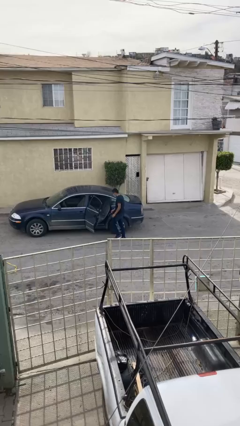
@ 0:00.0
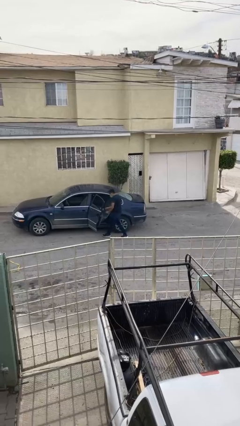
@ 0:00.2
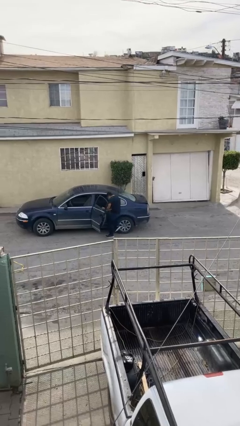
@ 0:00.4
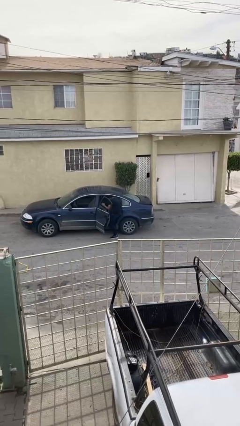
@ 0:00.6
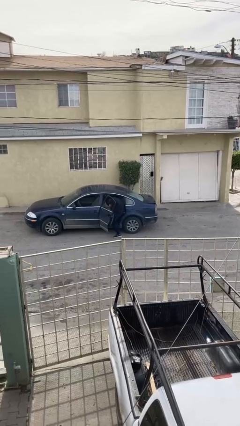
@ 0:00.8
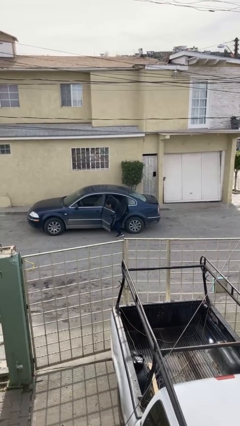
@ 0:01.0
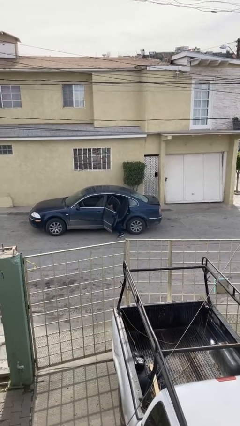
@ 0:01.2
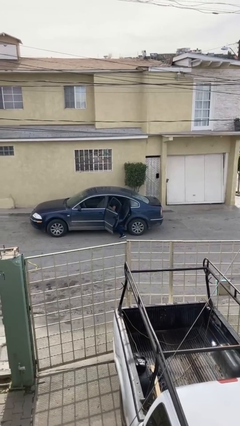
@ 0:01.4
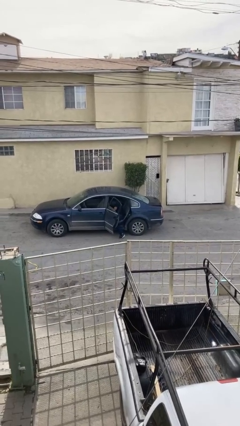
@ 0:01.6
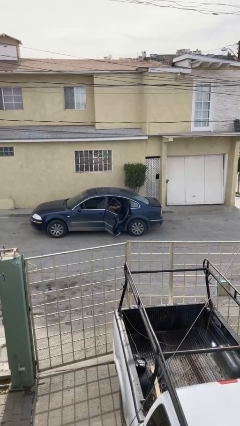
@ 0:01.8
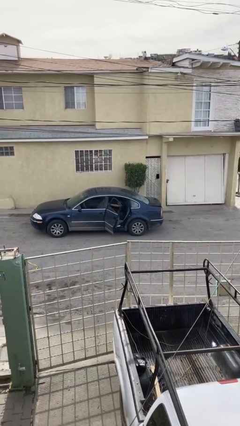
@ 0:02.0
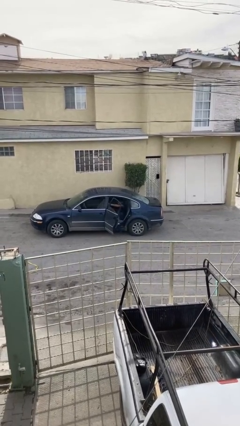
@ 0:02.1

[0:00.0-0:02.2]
person enters car

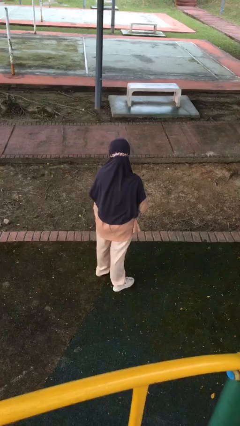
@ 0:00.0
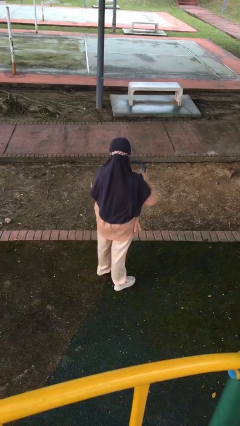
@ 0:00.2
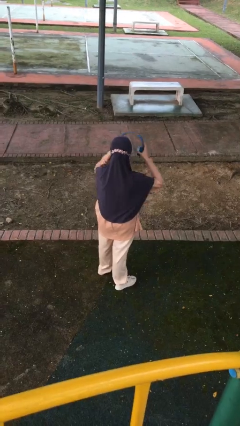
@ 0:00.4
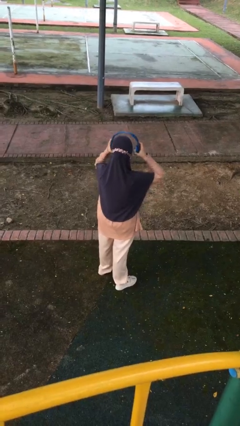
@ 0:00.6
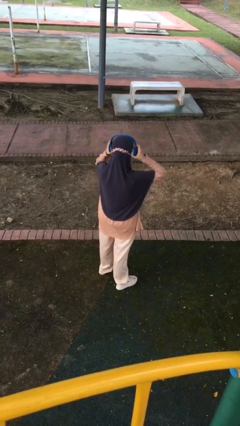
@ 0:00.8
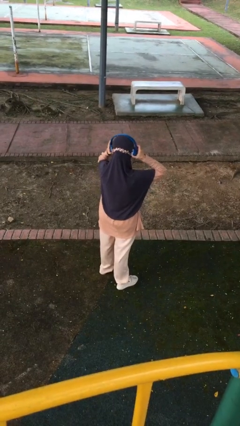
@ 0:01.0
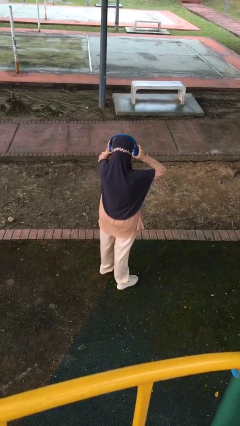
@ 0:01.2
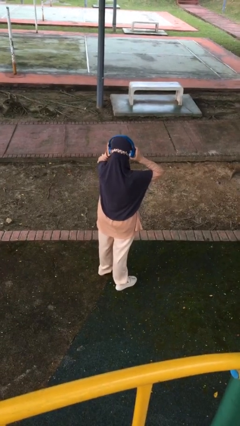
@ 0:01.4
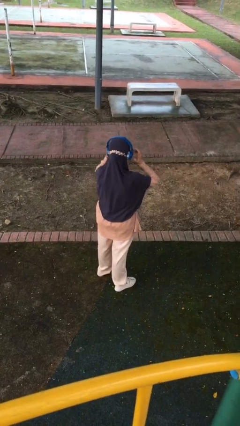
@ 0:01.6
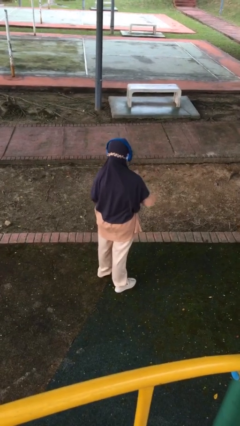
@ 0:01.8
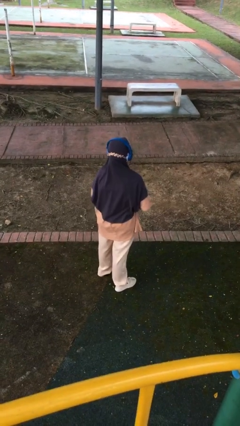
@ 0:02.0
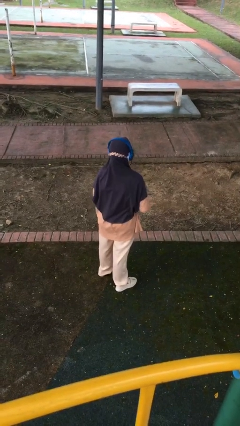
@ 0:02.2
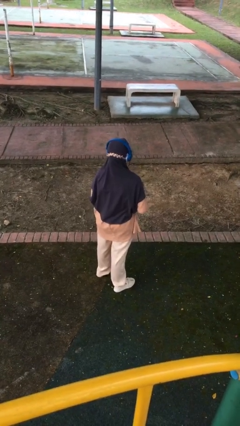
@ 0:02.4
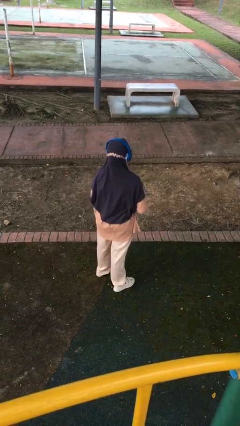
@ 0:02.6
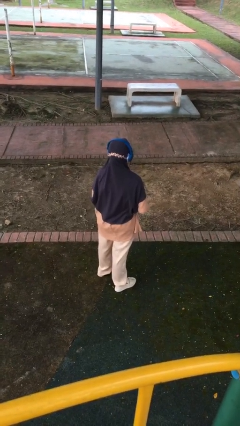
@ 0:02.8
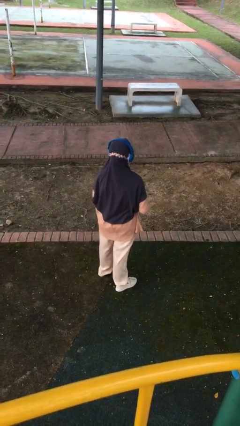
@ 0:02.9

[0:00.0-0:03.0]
person puts on headphones

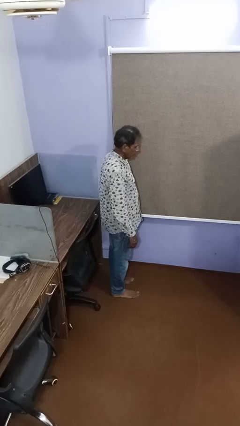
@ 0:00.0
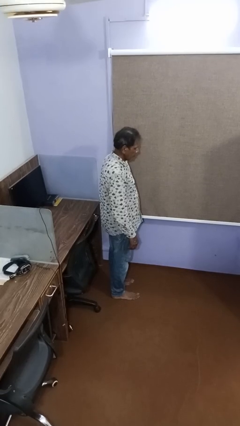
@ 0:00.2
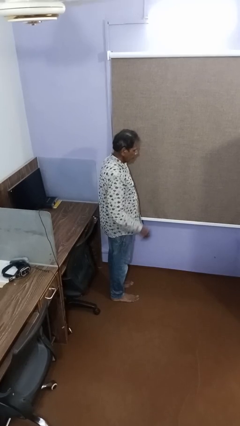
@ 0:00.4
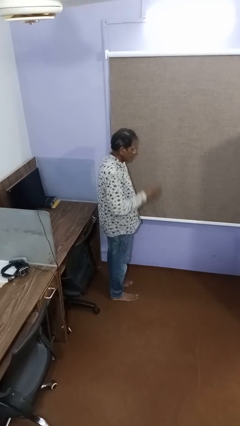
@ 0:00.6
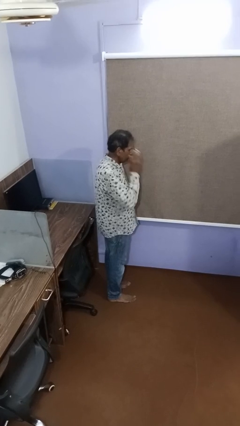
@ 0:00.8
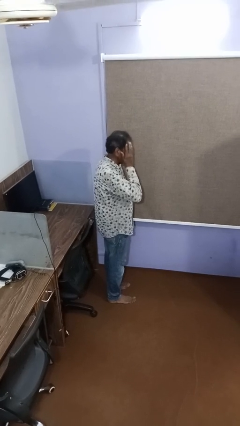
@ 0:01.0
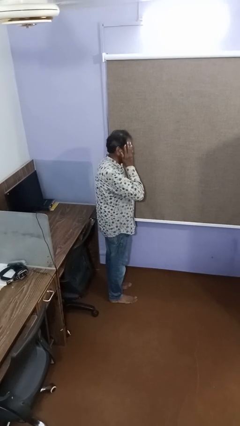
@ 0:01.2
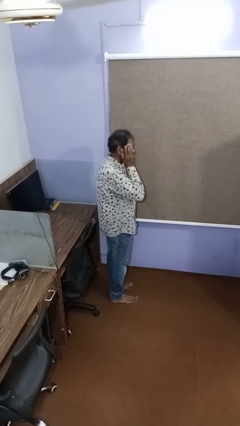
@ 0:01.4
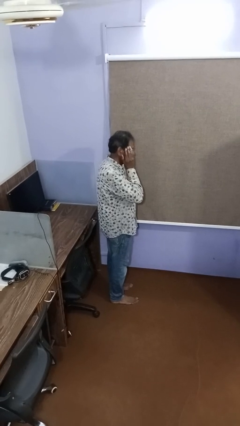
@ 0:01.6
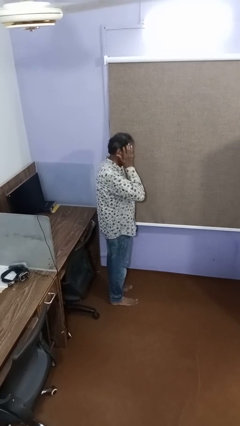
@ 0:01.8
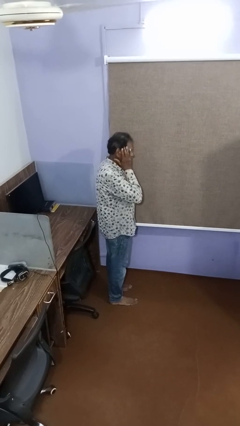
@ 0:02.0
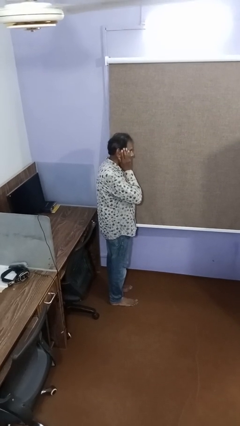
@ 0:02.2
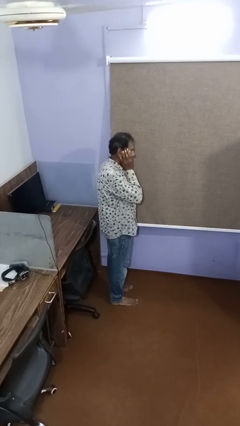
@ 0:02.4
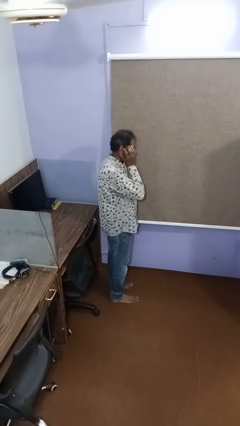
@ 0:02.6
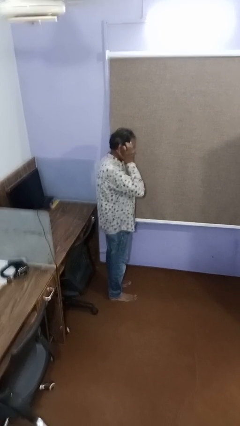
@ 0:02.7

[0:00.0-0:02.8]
person scratches face

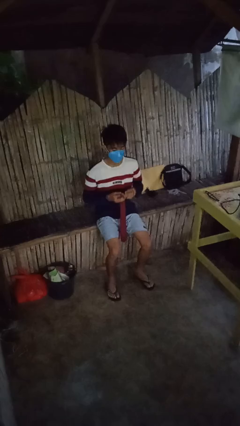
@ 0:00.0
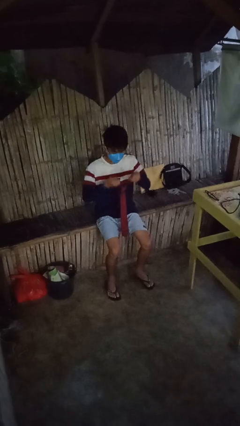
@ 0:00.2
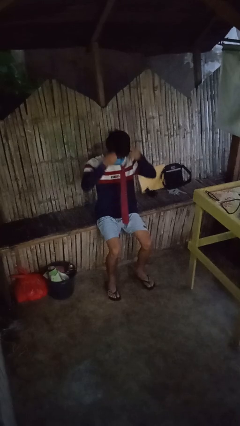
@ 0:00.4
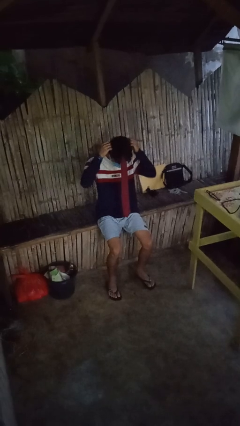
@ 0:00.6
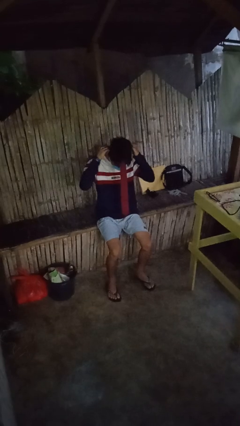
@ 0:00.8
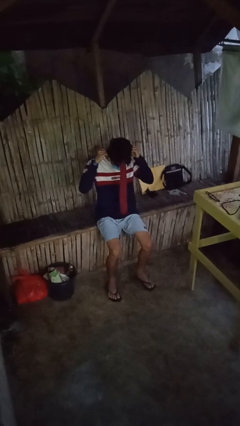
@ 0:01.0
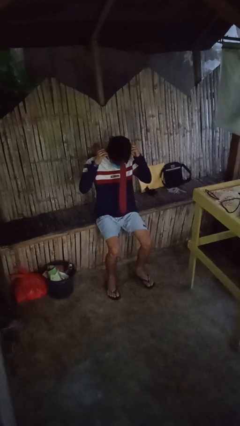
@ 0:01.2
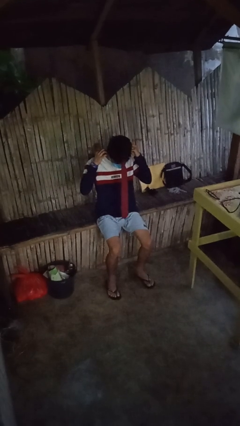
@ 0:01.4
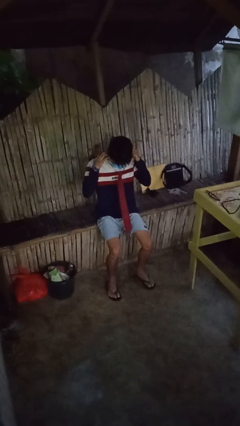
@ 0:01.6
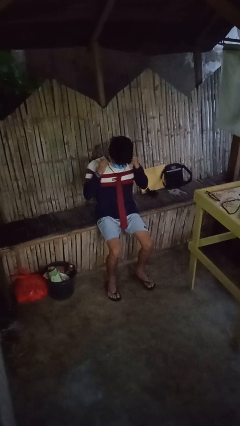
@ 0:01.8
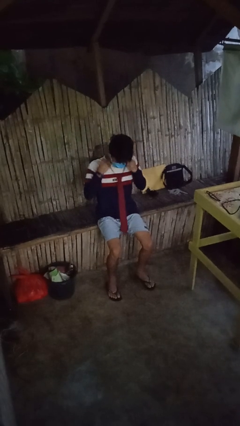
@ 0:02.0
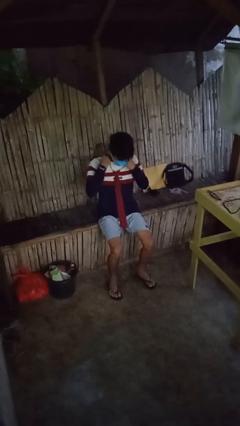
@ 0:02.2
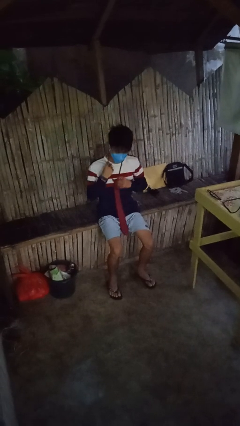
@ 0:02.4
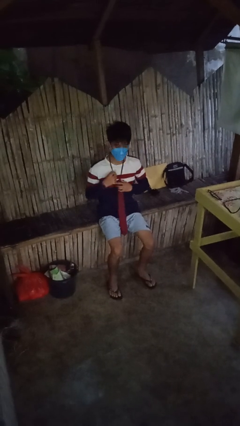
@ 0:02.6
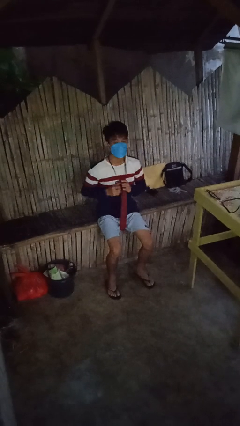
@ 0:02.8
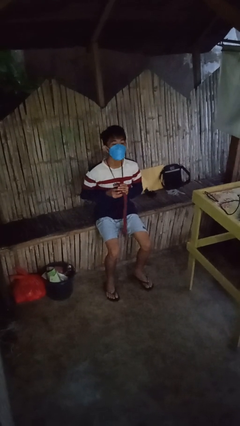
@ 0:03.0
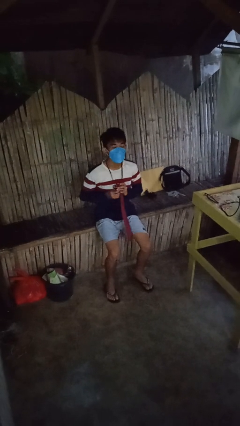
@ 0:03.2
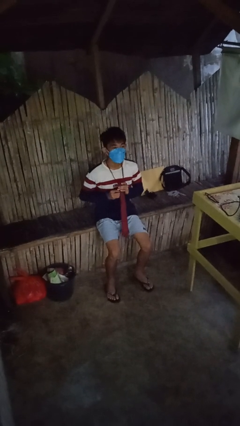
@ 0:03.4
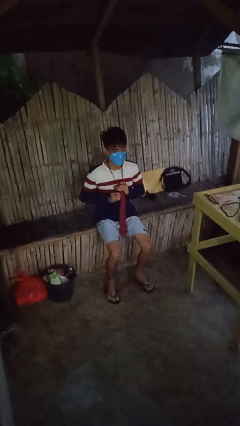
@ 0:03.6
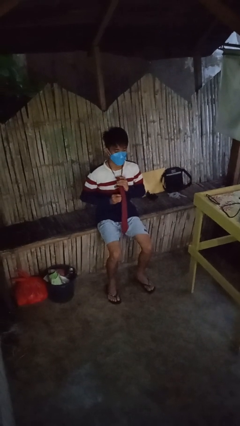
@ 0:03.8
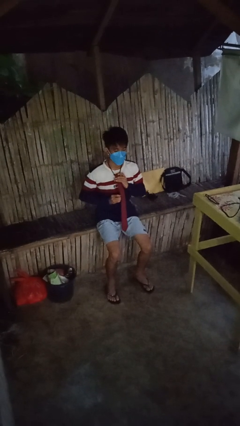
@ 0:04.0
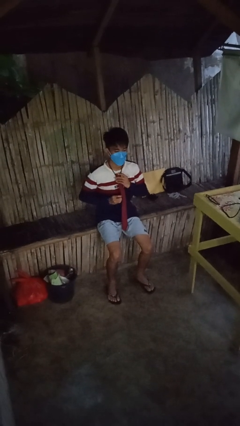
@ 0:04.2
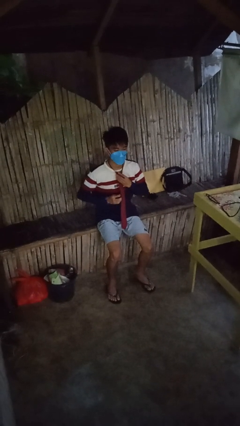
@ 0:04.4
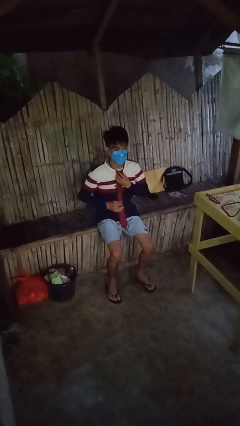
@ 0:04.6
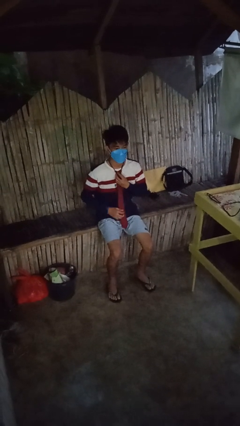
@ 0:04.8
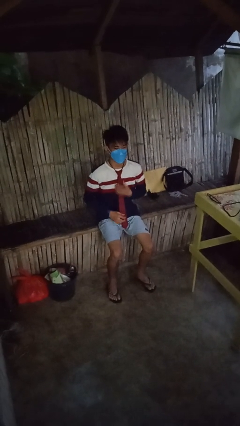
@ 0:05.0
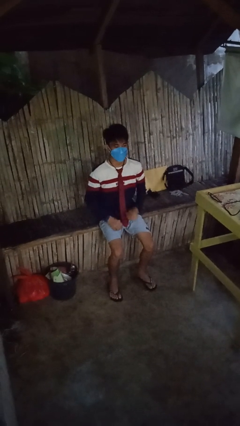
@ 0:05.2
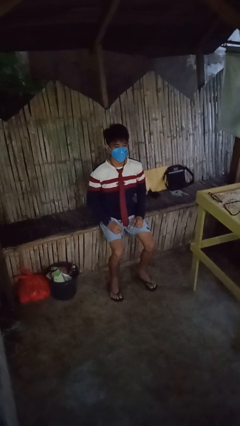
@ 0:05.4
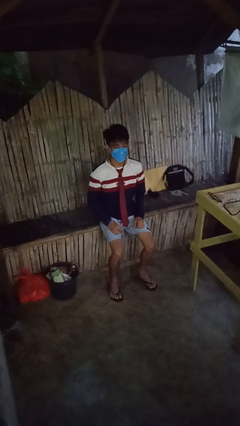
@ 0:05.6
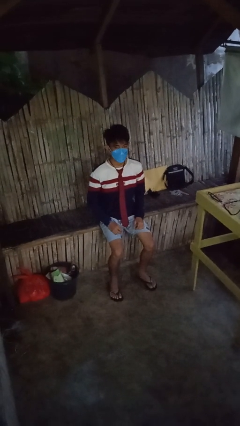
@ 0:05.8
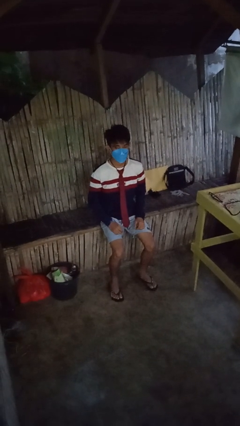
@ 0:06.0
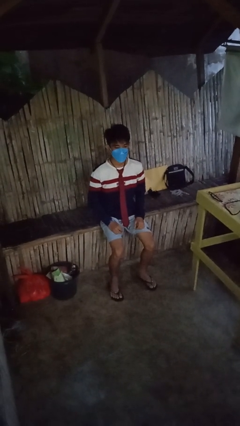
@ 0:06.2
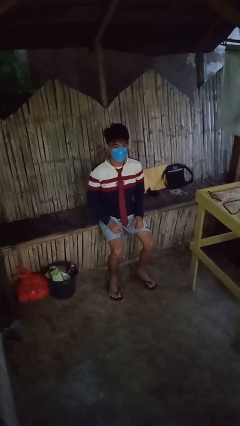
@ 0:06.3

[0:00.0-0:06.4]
person puts on necktie

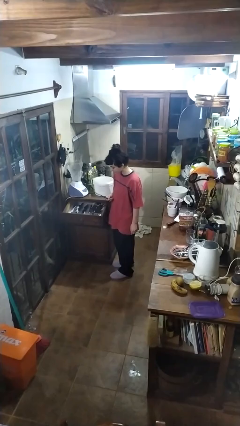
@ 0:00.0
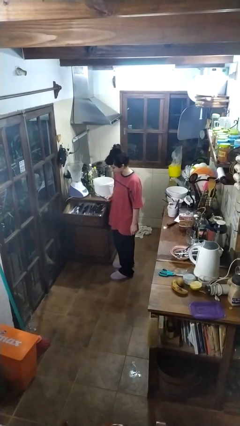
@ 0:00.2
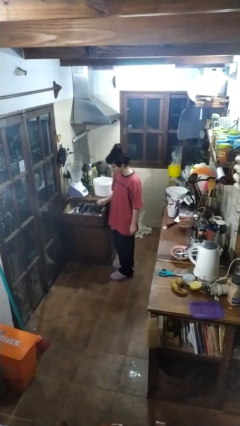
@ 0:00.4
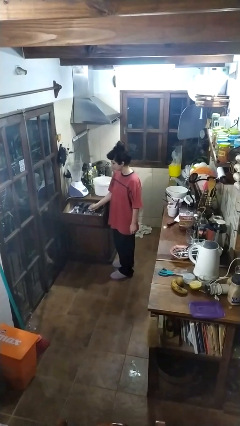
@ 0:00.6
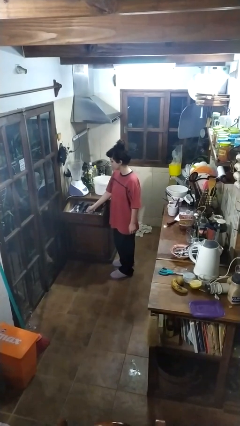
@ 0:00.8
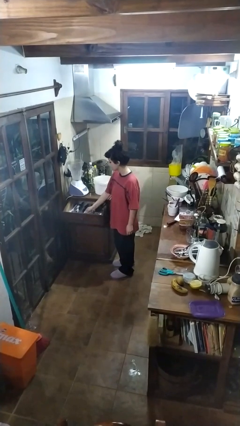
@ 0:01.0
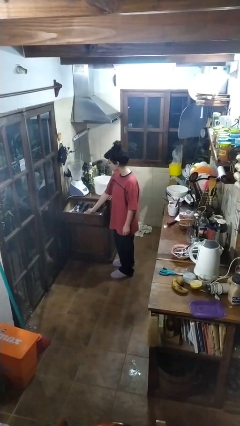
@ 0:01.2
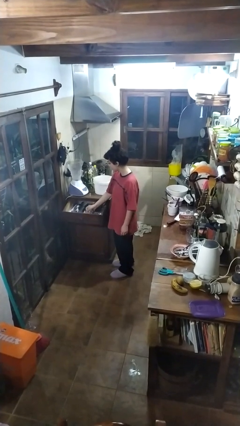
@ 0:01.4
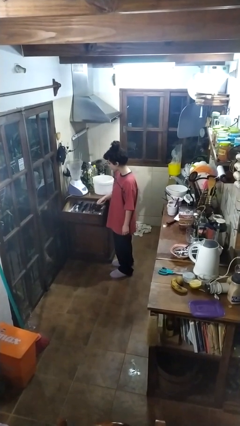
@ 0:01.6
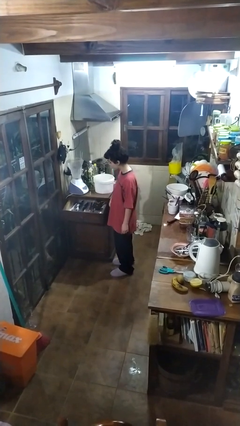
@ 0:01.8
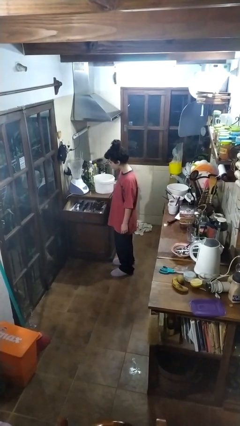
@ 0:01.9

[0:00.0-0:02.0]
person puts object into kitchen drawer

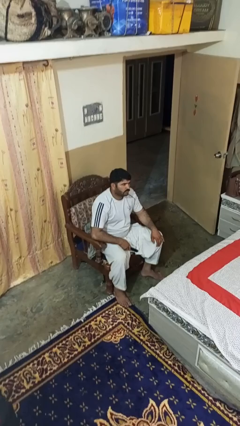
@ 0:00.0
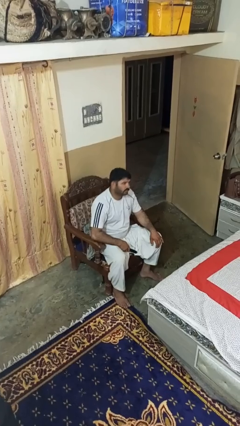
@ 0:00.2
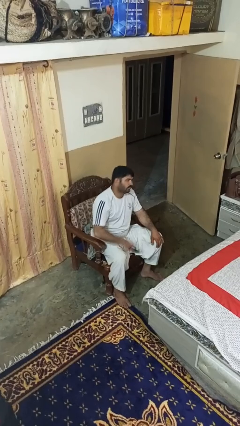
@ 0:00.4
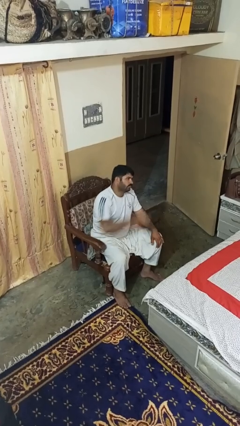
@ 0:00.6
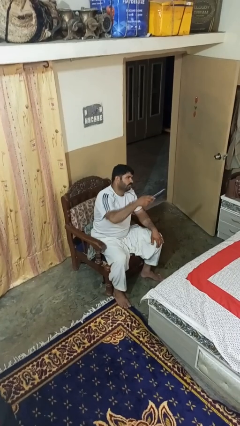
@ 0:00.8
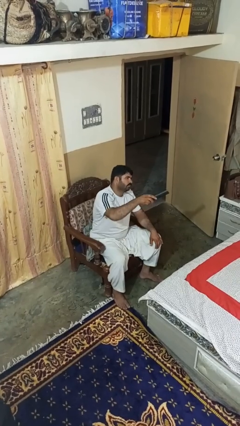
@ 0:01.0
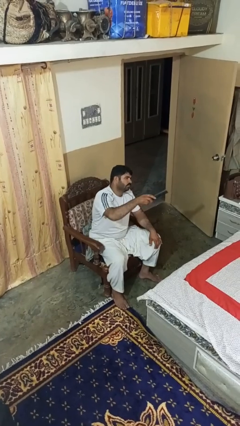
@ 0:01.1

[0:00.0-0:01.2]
person uses television remote
